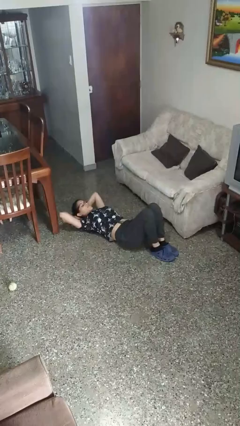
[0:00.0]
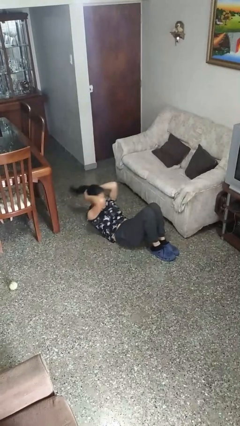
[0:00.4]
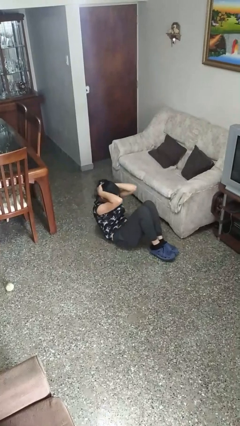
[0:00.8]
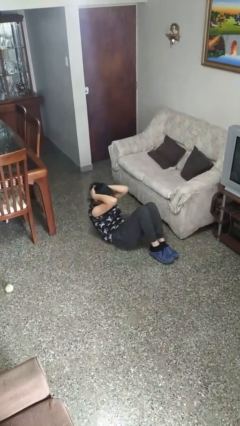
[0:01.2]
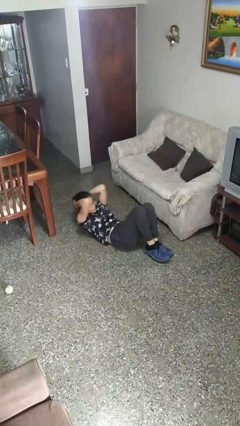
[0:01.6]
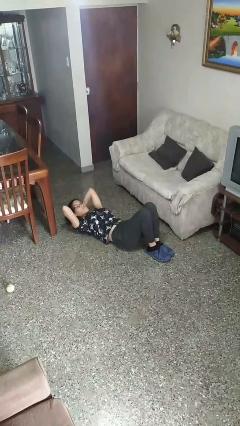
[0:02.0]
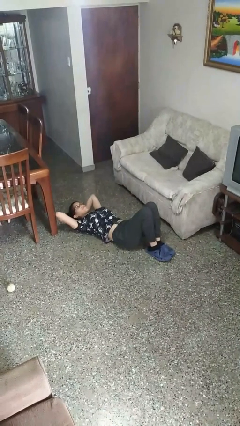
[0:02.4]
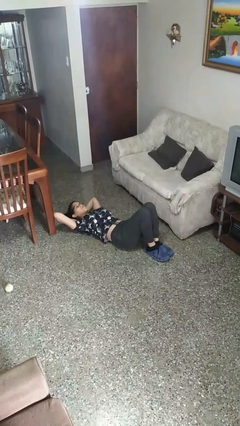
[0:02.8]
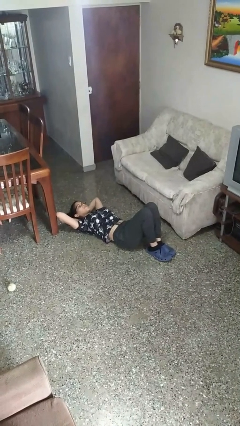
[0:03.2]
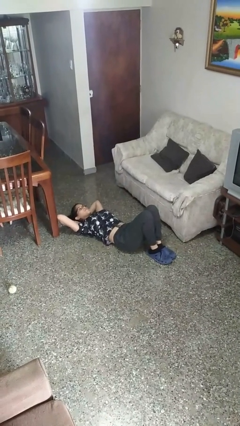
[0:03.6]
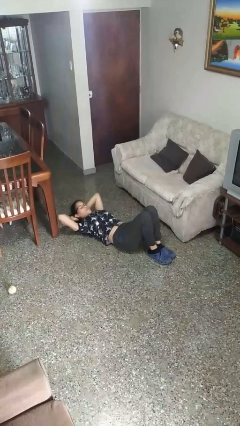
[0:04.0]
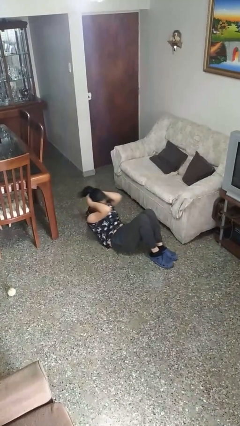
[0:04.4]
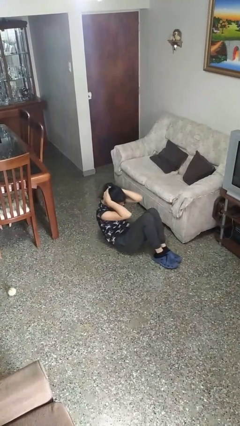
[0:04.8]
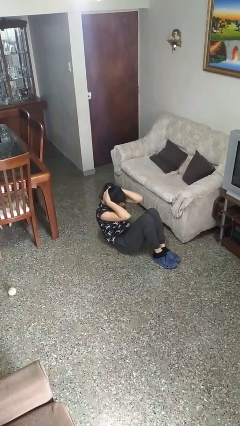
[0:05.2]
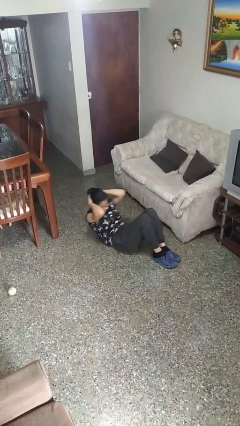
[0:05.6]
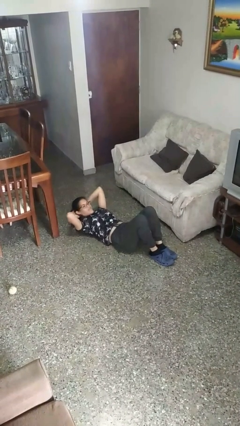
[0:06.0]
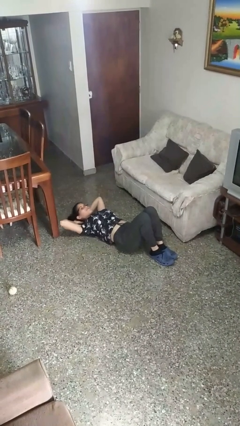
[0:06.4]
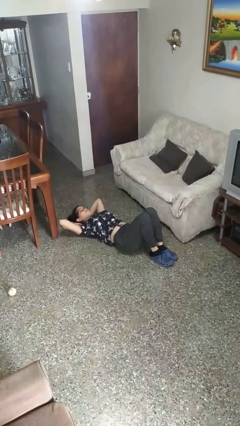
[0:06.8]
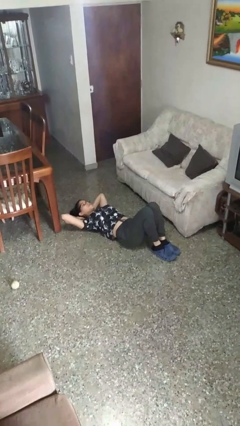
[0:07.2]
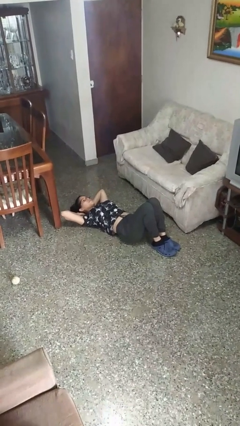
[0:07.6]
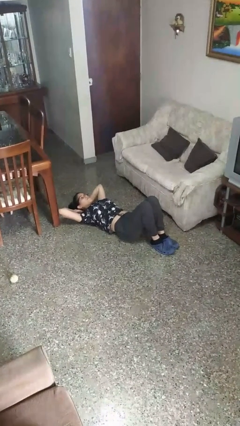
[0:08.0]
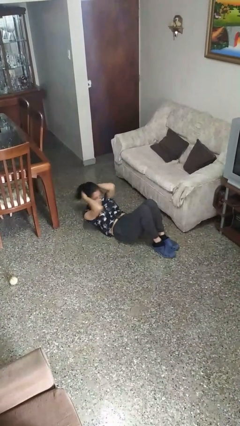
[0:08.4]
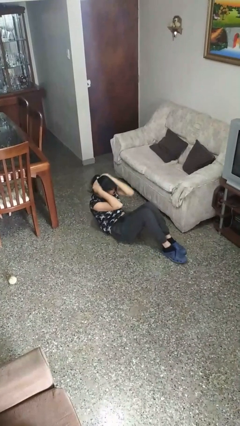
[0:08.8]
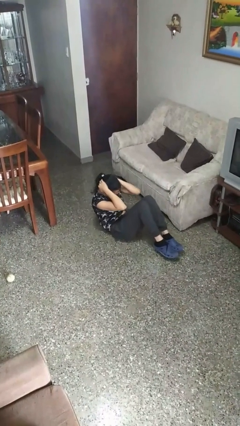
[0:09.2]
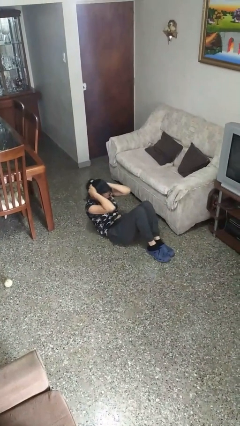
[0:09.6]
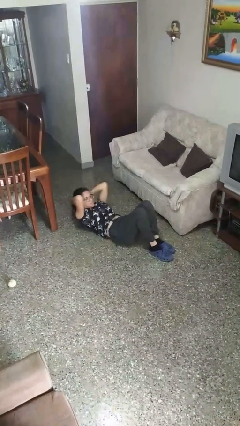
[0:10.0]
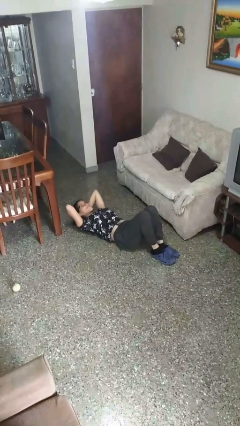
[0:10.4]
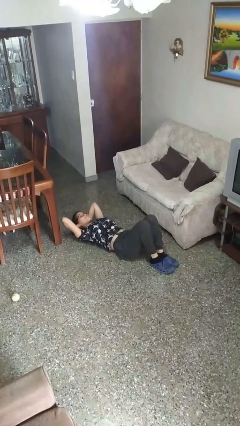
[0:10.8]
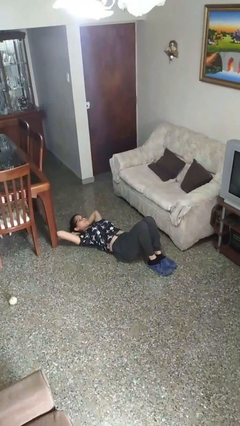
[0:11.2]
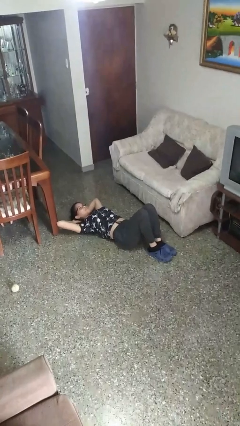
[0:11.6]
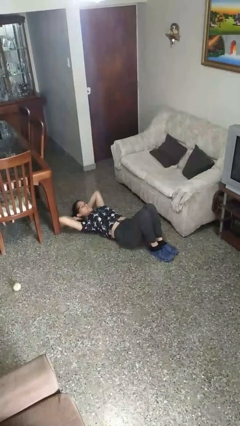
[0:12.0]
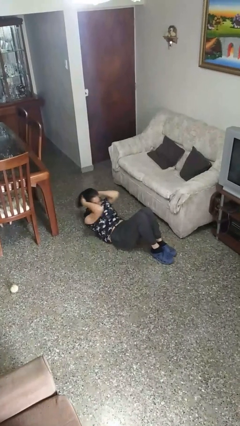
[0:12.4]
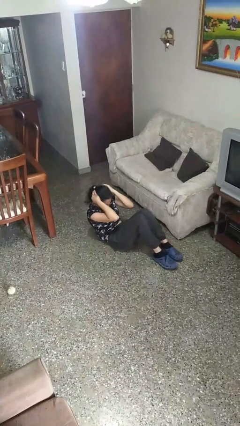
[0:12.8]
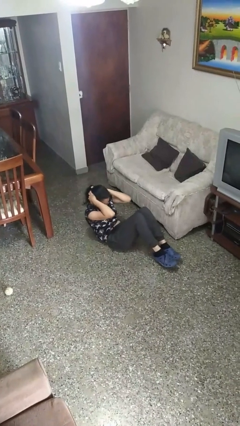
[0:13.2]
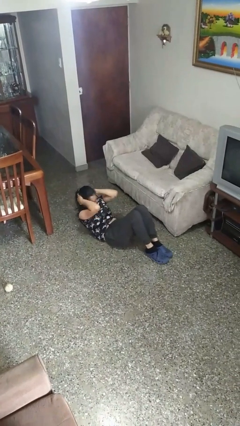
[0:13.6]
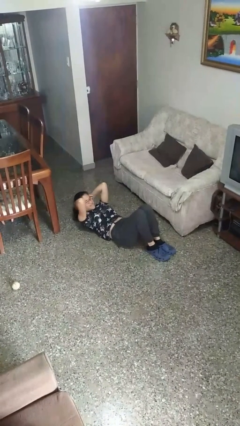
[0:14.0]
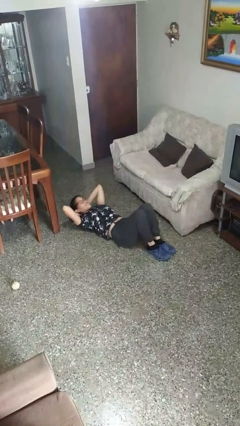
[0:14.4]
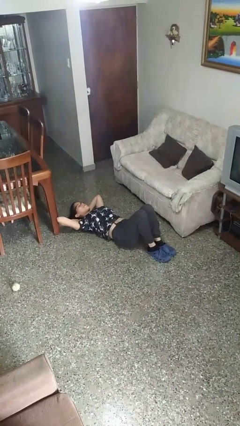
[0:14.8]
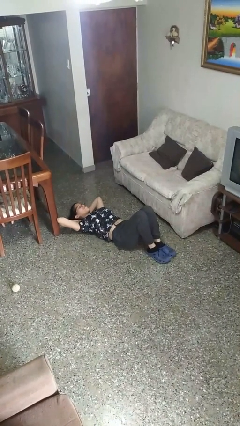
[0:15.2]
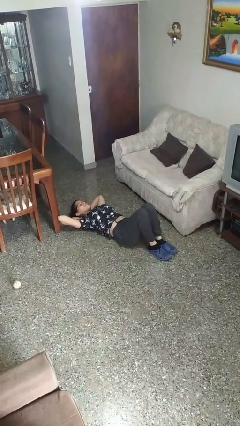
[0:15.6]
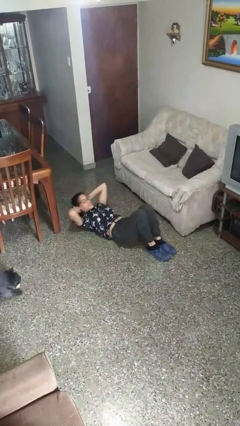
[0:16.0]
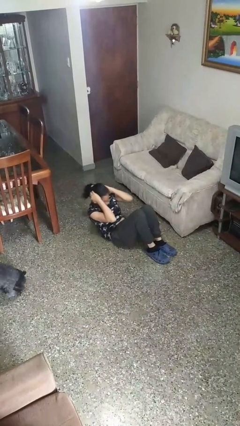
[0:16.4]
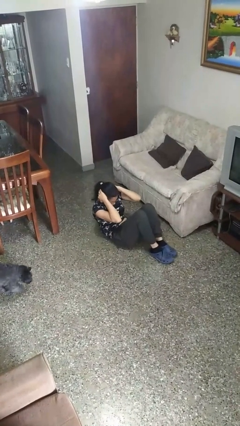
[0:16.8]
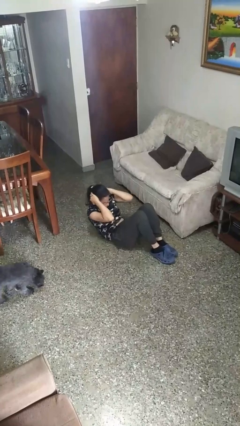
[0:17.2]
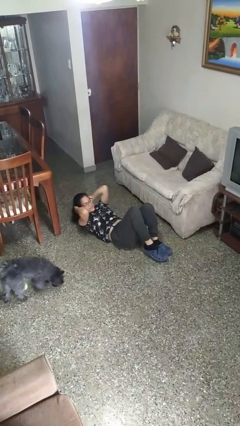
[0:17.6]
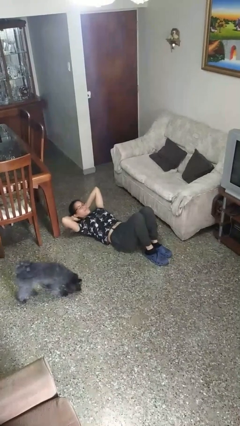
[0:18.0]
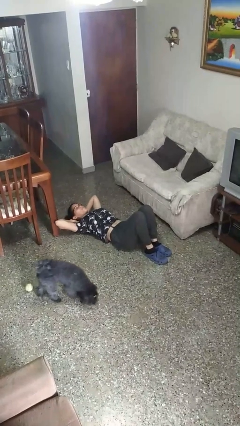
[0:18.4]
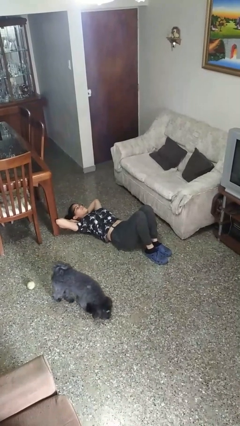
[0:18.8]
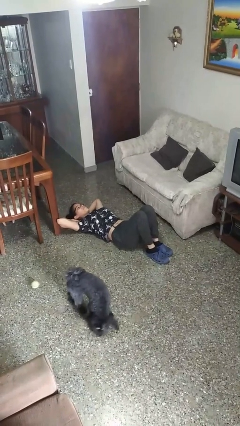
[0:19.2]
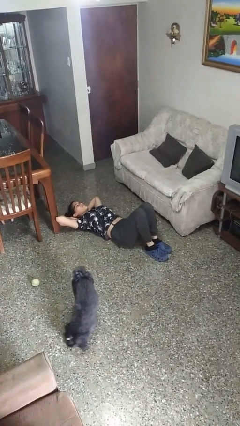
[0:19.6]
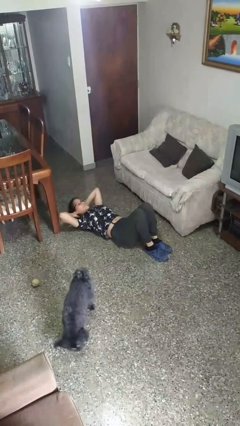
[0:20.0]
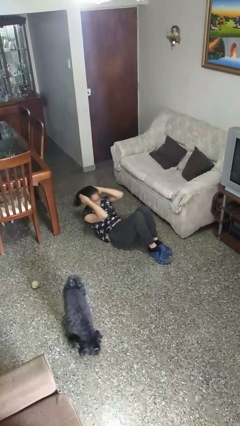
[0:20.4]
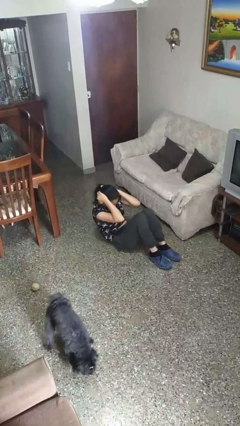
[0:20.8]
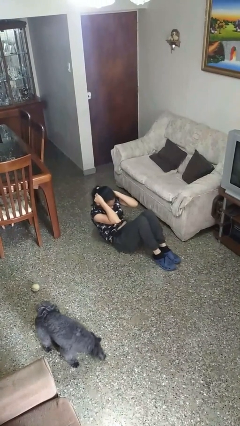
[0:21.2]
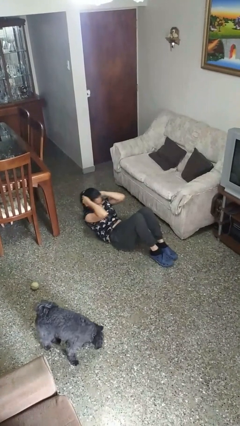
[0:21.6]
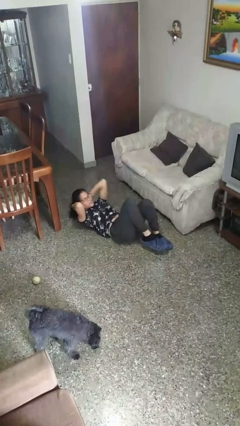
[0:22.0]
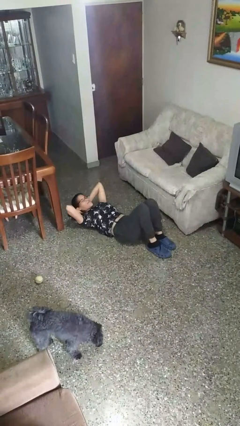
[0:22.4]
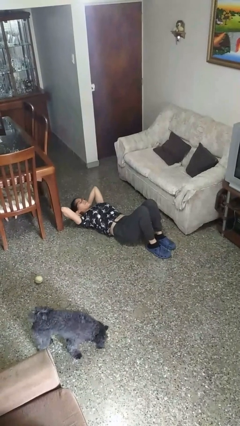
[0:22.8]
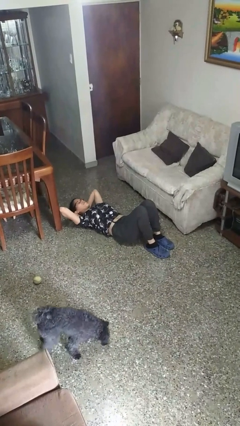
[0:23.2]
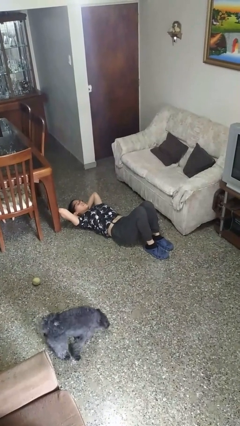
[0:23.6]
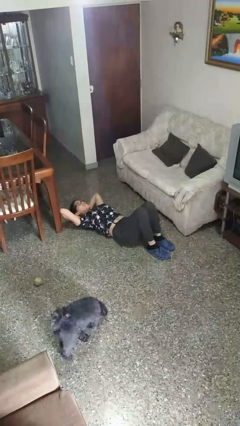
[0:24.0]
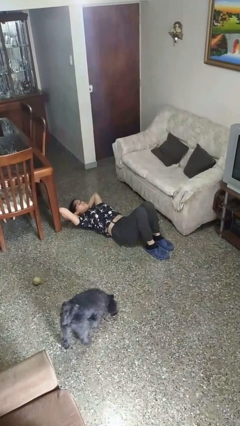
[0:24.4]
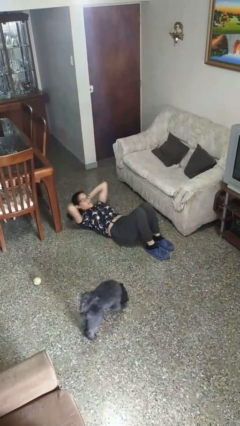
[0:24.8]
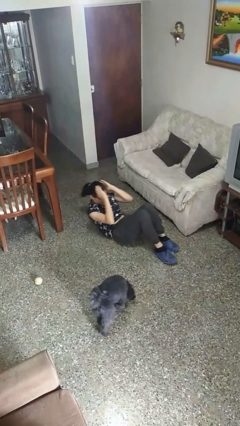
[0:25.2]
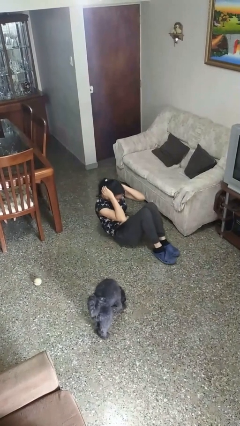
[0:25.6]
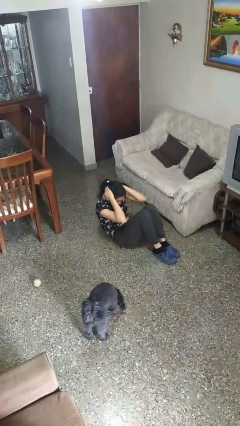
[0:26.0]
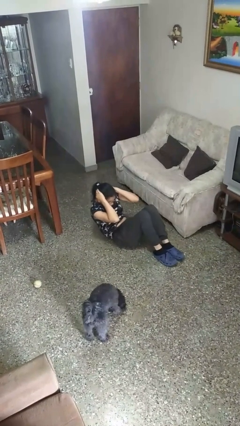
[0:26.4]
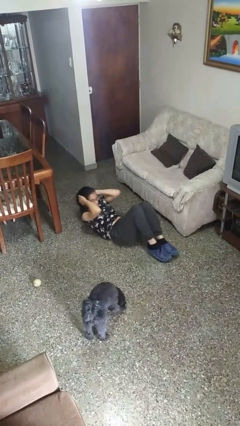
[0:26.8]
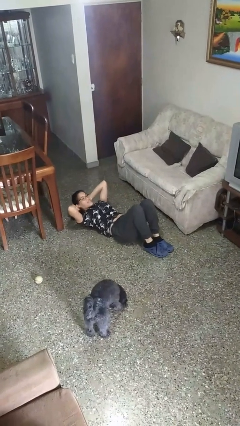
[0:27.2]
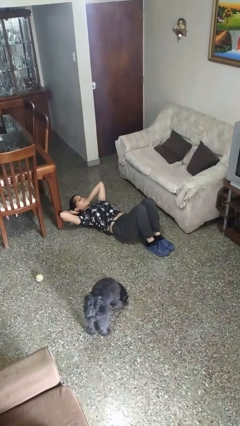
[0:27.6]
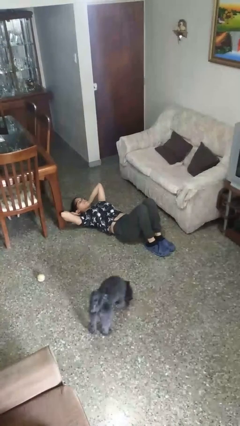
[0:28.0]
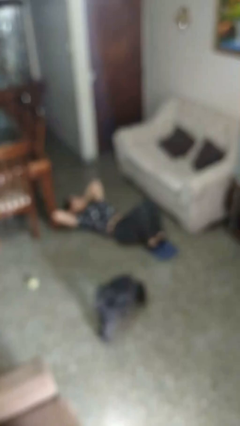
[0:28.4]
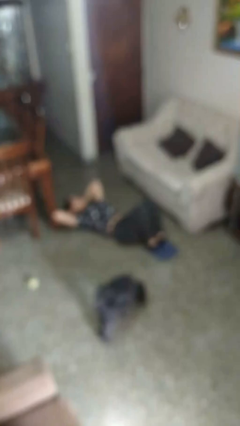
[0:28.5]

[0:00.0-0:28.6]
person exercises with situp

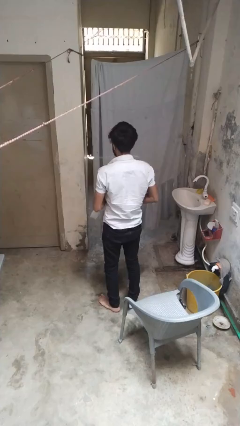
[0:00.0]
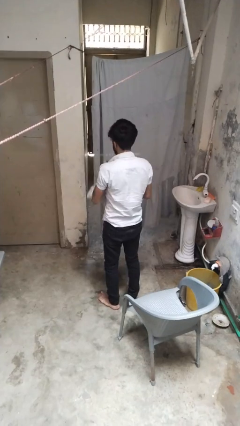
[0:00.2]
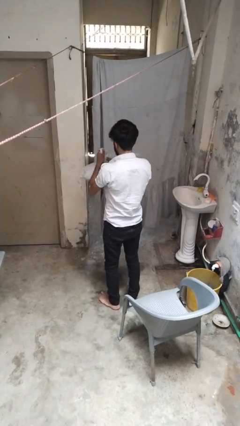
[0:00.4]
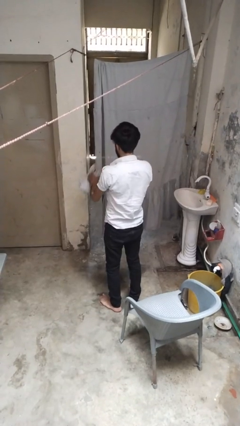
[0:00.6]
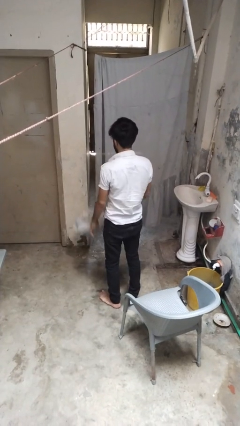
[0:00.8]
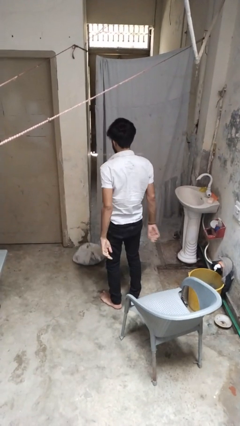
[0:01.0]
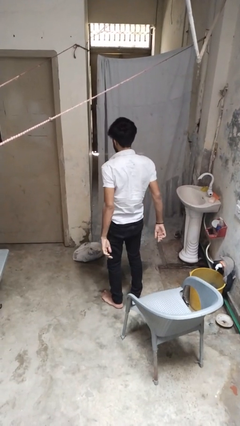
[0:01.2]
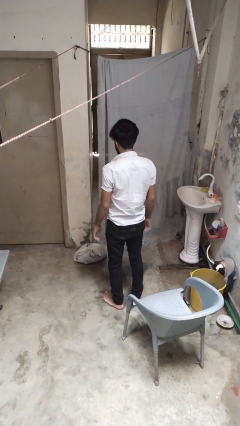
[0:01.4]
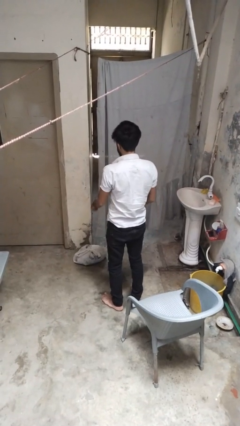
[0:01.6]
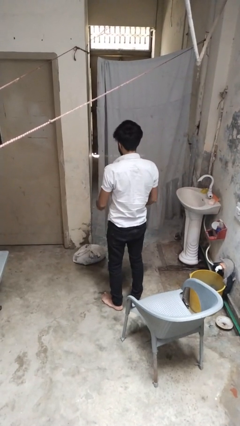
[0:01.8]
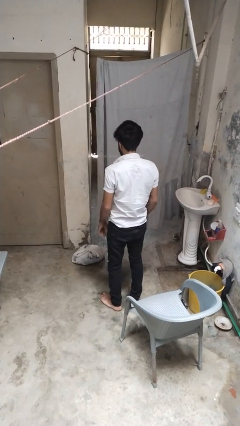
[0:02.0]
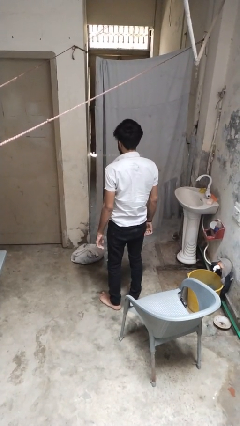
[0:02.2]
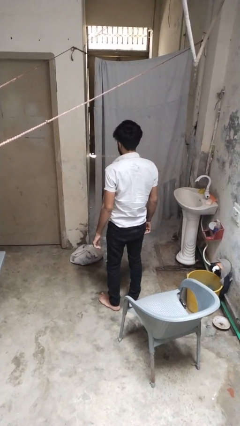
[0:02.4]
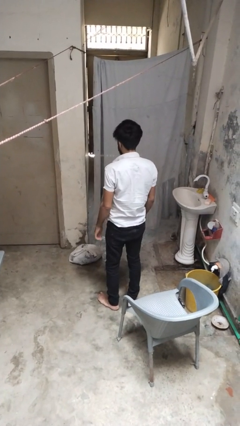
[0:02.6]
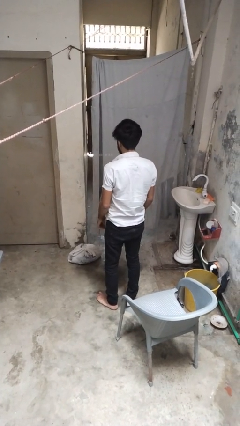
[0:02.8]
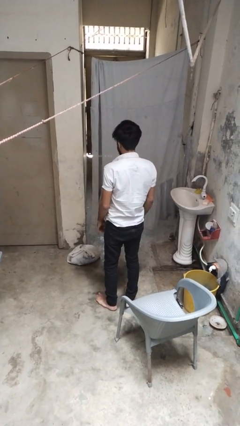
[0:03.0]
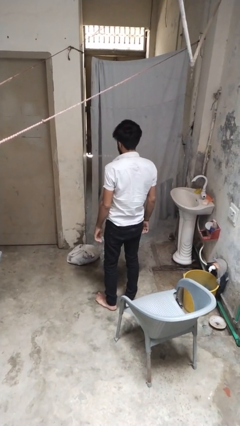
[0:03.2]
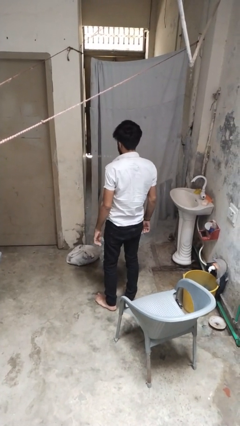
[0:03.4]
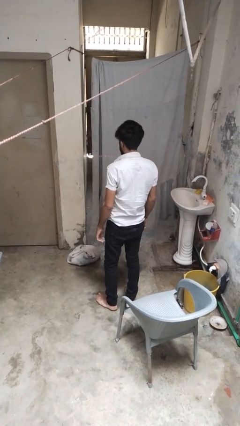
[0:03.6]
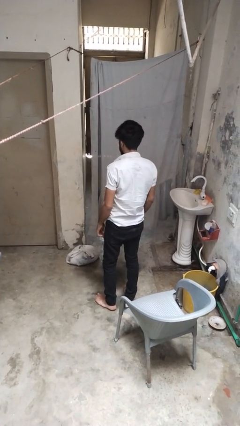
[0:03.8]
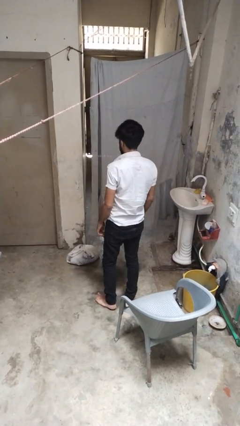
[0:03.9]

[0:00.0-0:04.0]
person throws object to ground
